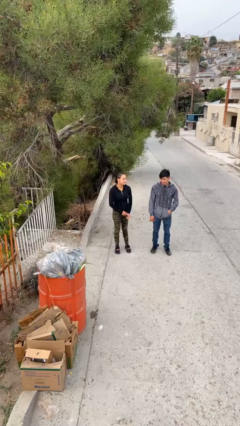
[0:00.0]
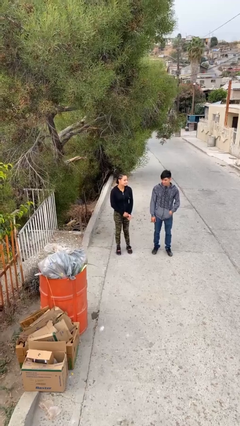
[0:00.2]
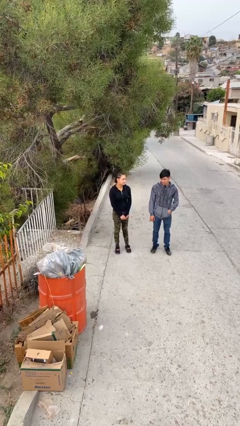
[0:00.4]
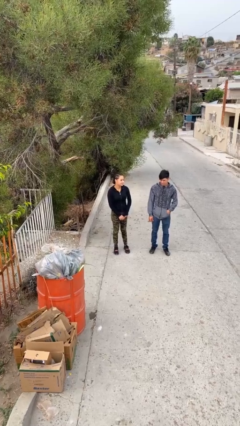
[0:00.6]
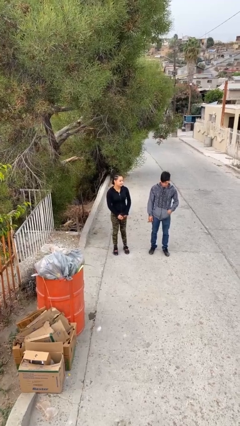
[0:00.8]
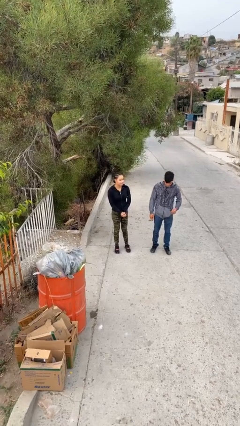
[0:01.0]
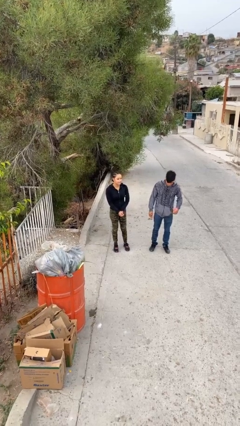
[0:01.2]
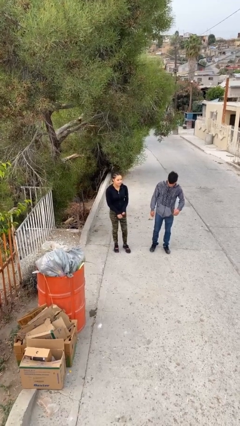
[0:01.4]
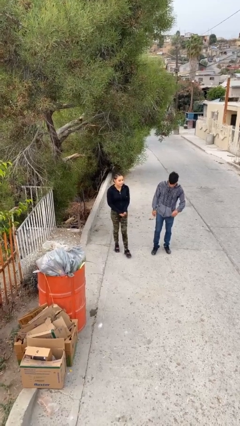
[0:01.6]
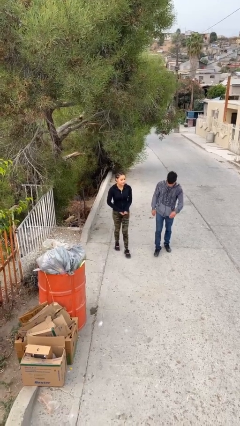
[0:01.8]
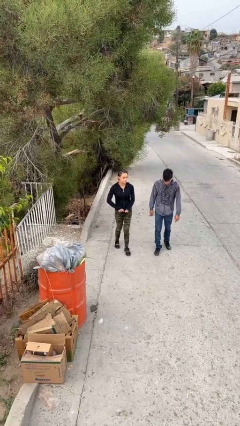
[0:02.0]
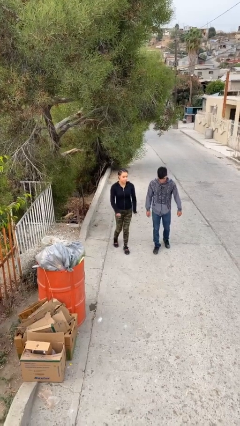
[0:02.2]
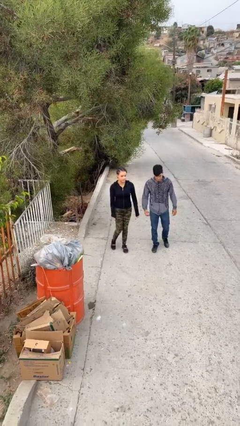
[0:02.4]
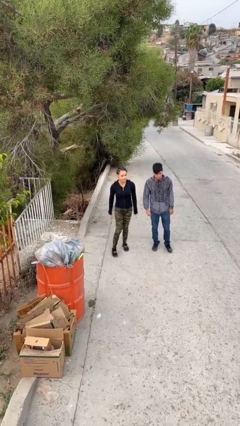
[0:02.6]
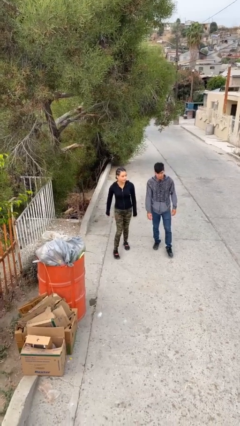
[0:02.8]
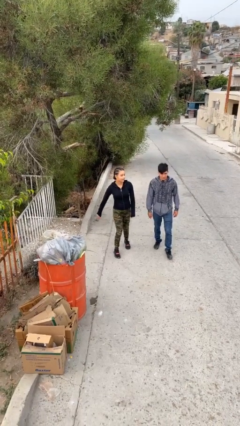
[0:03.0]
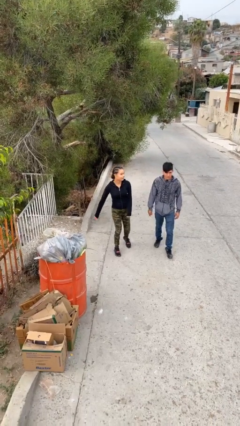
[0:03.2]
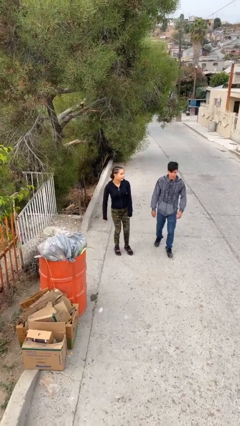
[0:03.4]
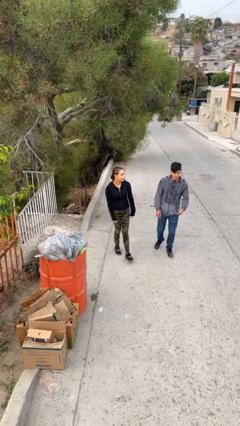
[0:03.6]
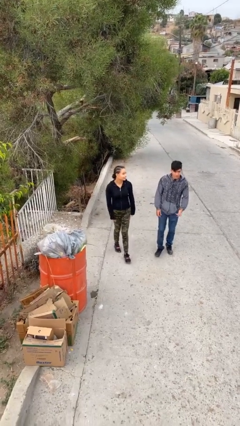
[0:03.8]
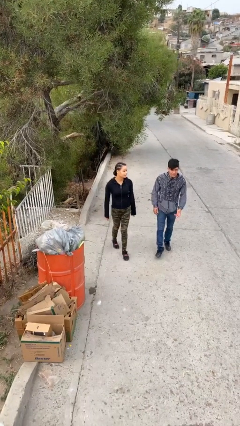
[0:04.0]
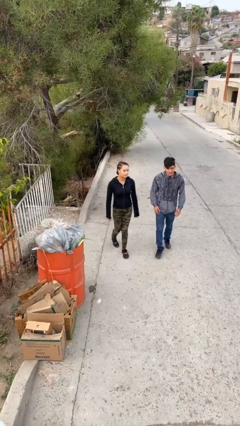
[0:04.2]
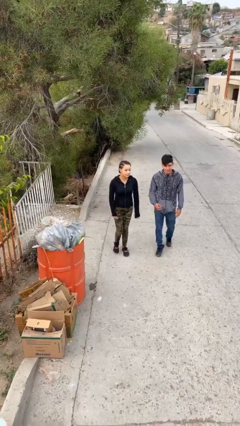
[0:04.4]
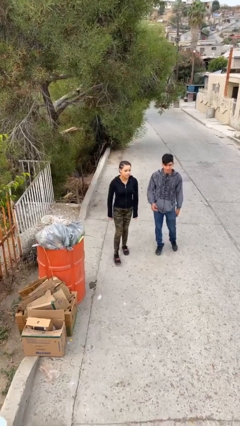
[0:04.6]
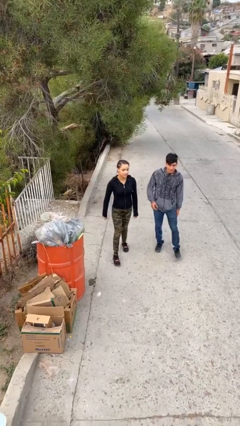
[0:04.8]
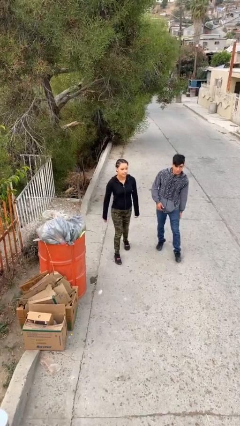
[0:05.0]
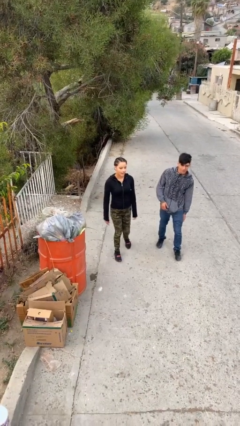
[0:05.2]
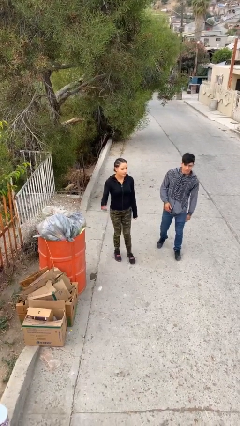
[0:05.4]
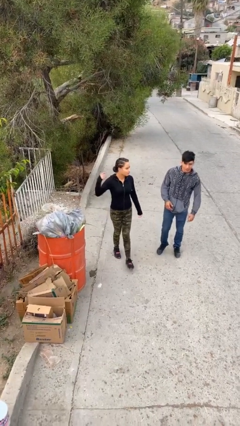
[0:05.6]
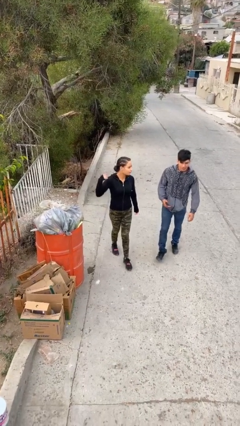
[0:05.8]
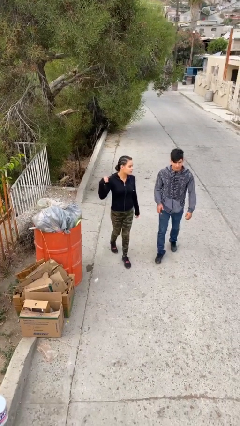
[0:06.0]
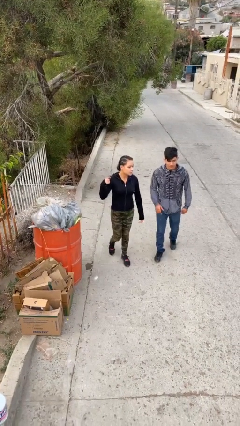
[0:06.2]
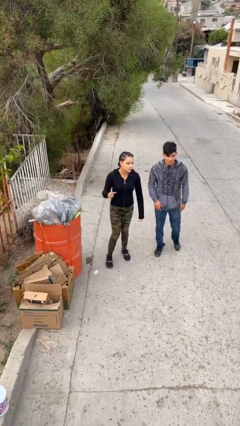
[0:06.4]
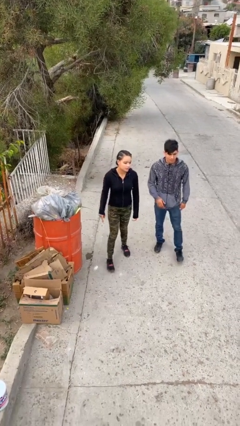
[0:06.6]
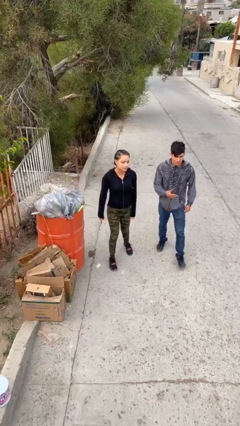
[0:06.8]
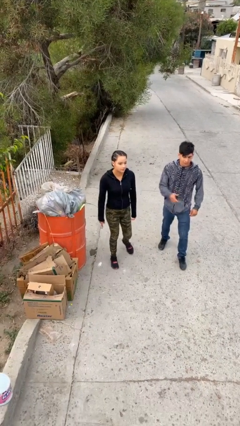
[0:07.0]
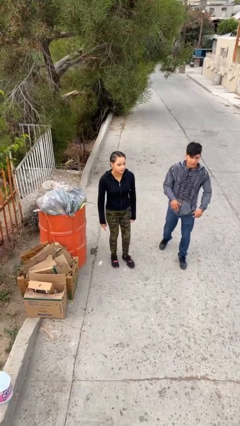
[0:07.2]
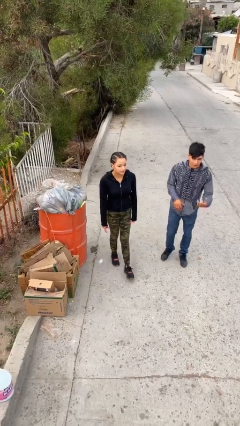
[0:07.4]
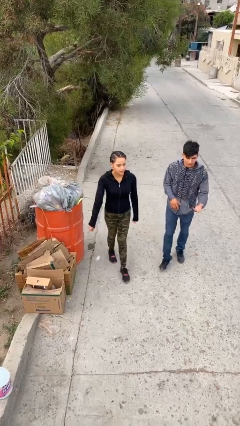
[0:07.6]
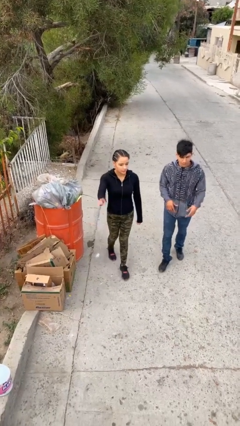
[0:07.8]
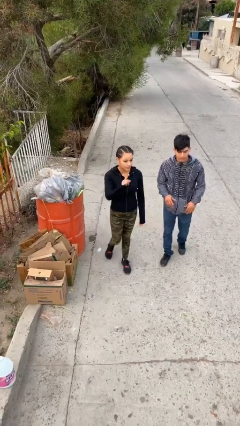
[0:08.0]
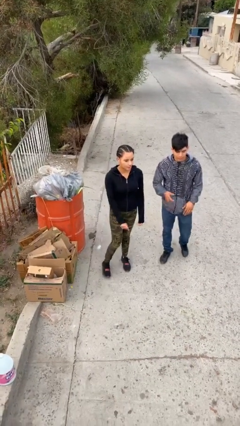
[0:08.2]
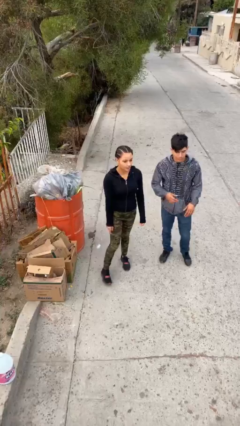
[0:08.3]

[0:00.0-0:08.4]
person talks to person

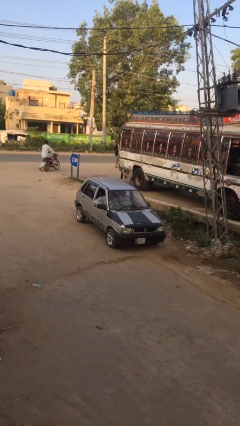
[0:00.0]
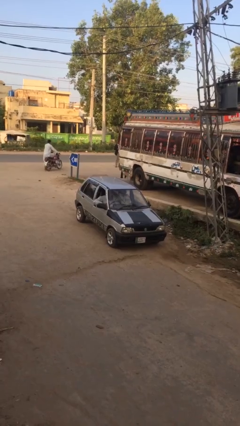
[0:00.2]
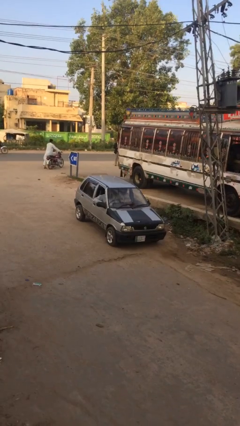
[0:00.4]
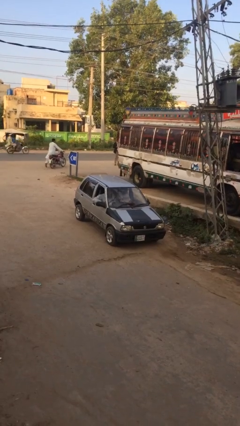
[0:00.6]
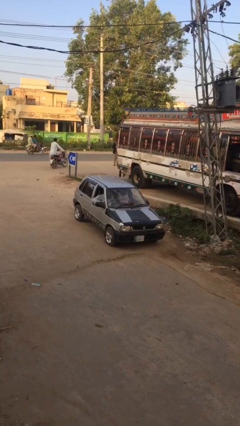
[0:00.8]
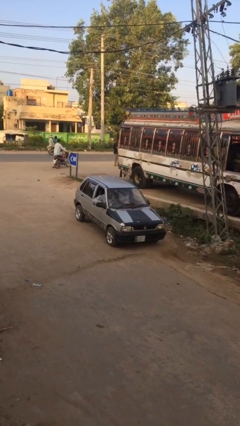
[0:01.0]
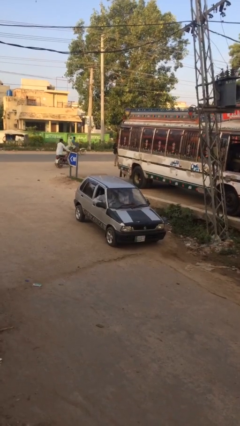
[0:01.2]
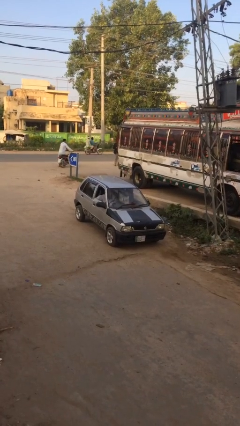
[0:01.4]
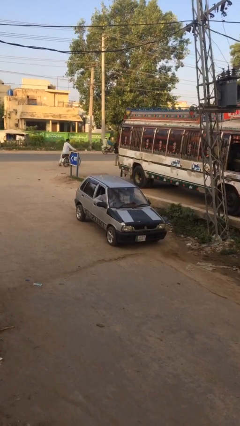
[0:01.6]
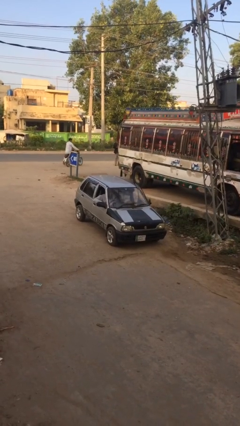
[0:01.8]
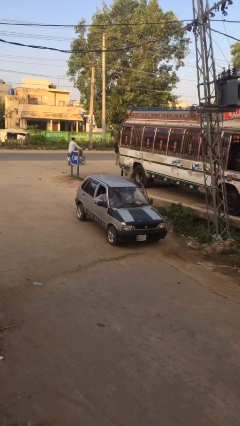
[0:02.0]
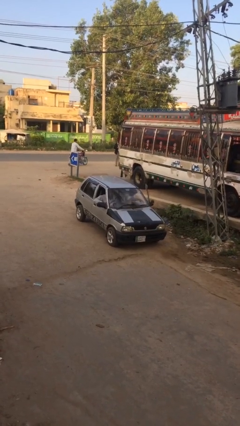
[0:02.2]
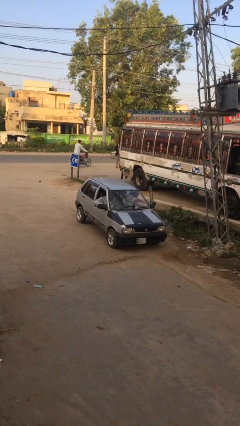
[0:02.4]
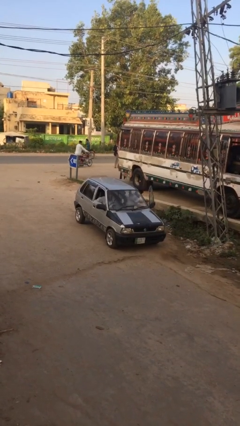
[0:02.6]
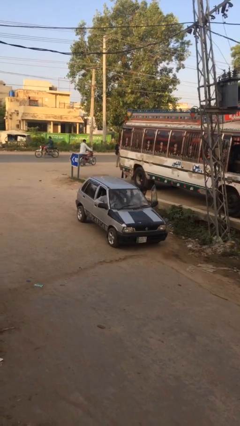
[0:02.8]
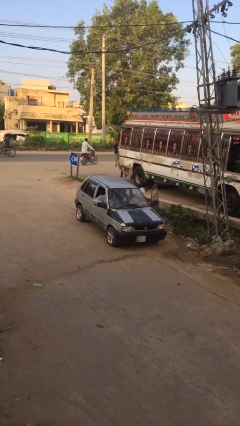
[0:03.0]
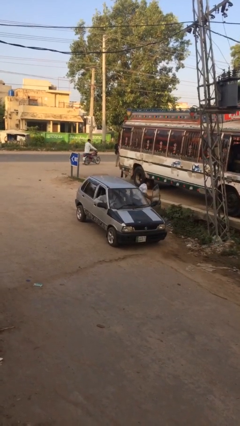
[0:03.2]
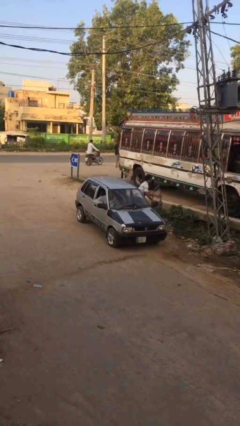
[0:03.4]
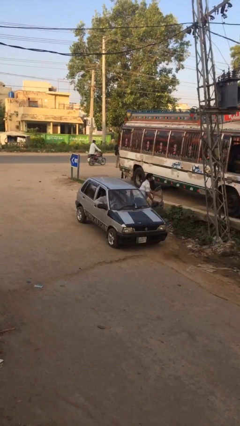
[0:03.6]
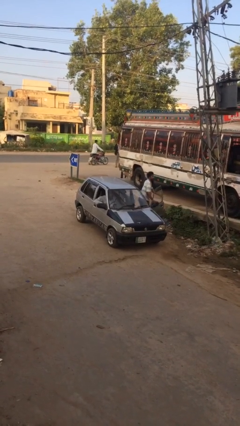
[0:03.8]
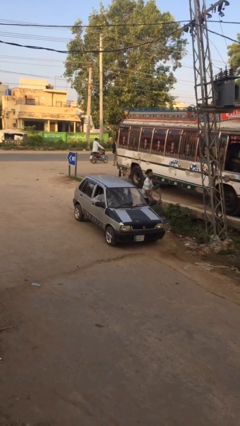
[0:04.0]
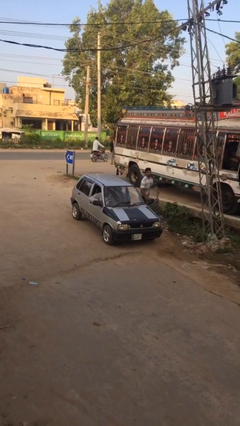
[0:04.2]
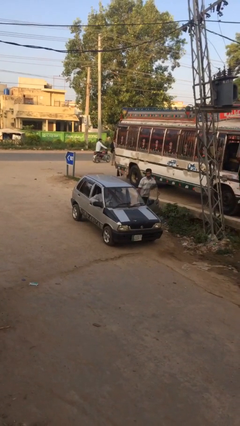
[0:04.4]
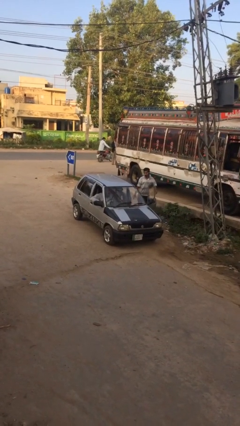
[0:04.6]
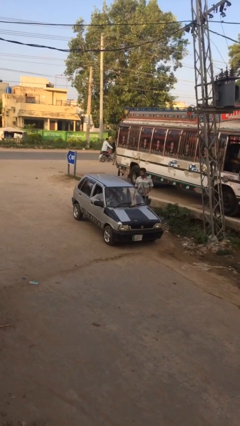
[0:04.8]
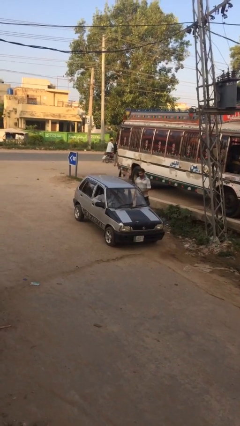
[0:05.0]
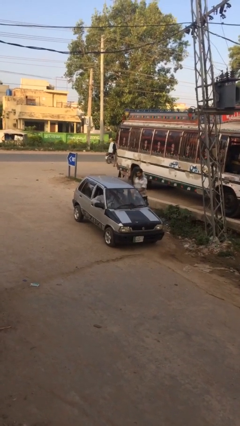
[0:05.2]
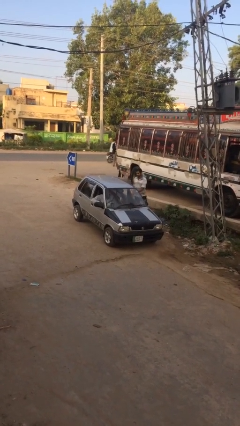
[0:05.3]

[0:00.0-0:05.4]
car drops off person

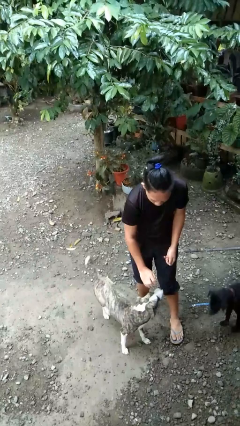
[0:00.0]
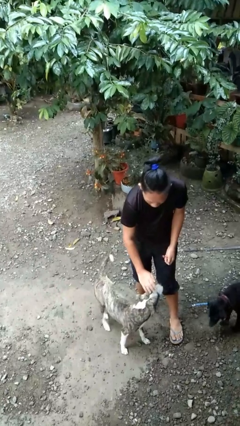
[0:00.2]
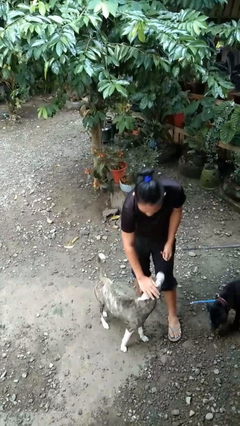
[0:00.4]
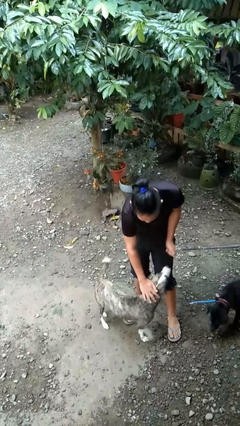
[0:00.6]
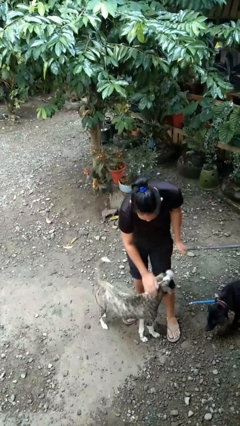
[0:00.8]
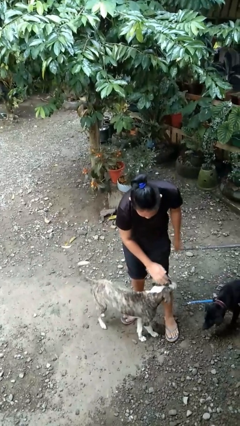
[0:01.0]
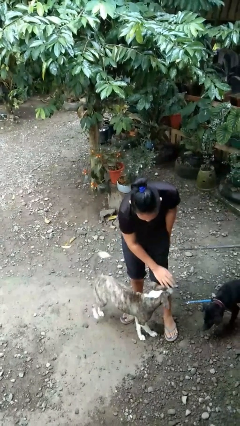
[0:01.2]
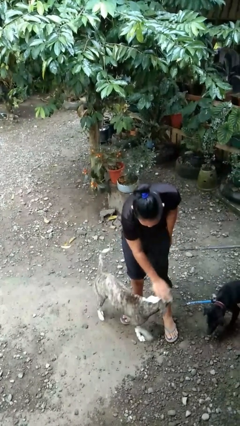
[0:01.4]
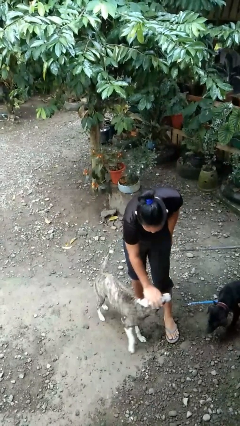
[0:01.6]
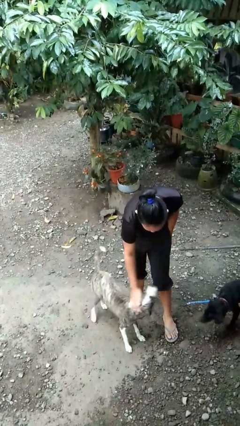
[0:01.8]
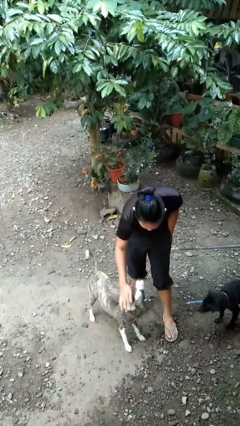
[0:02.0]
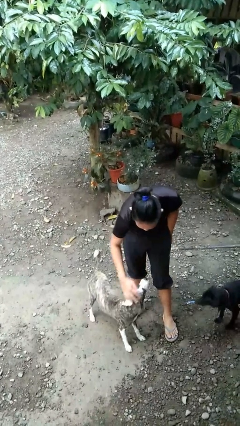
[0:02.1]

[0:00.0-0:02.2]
person pets dog

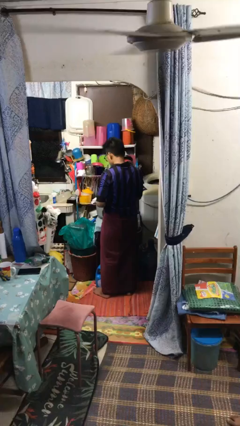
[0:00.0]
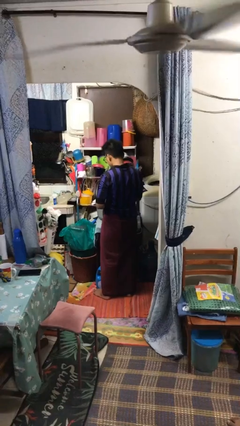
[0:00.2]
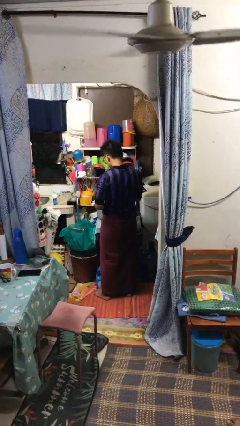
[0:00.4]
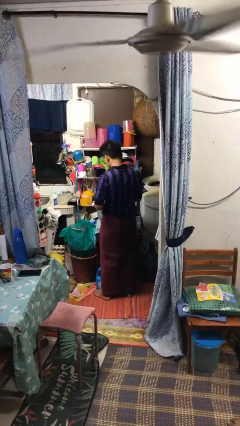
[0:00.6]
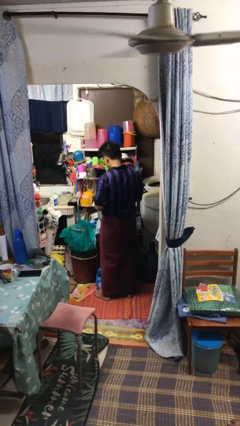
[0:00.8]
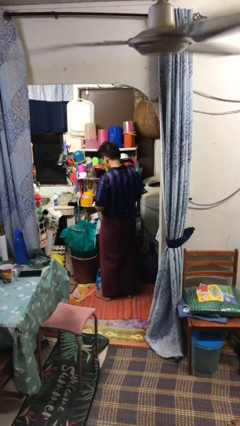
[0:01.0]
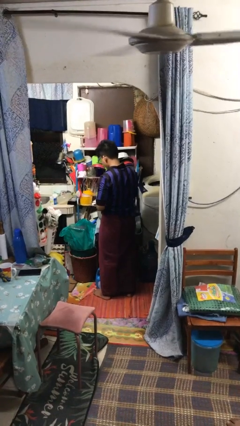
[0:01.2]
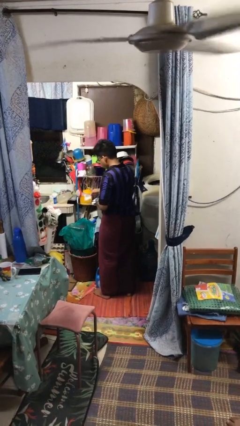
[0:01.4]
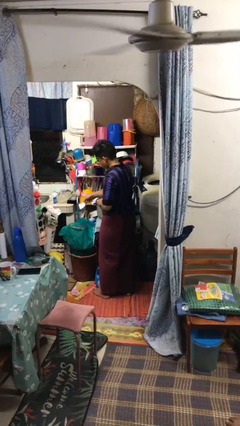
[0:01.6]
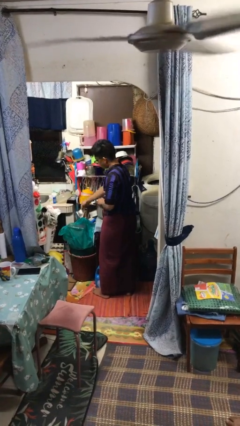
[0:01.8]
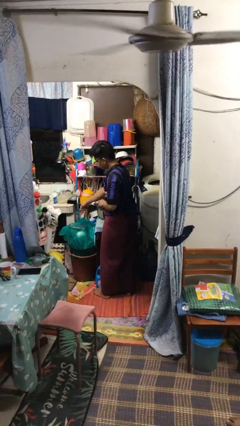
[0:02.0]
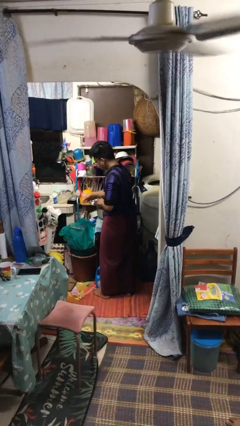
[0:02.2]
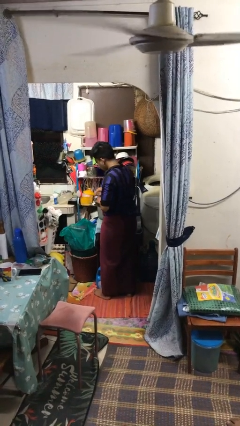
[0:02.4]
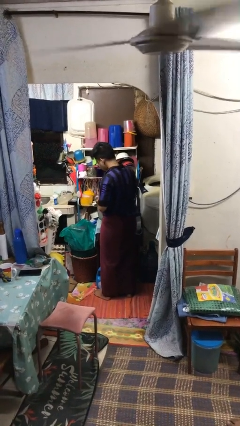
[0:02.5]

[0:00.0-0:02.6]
person discards trash
